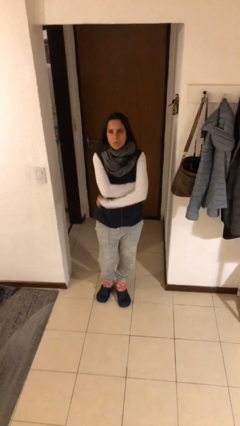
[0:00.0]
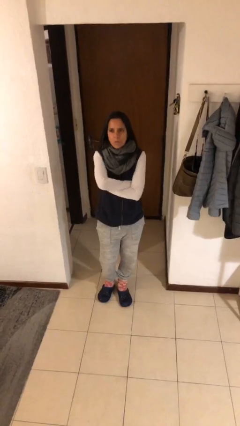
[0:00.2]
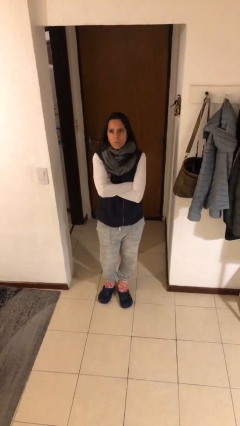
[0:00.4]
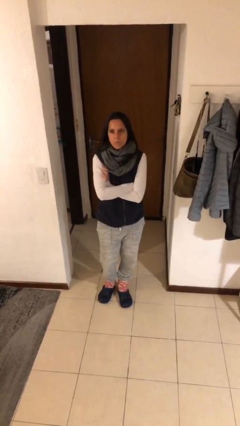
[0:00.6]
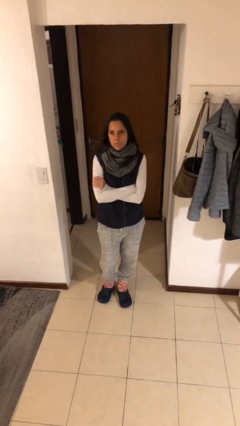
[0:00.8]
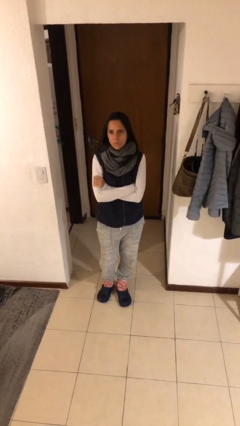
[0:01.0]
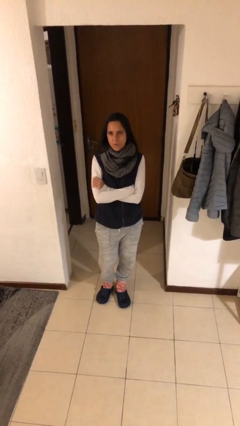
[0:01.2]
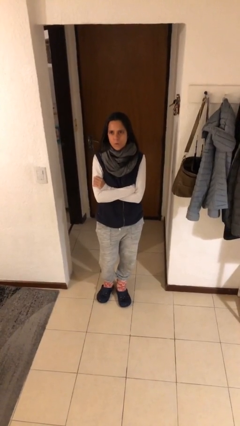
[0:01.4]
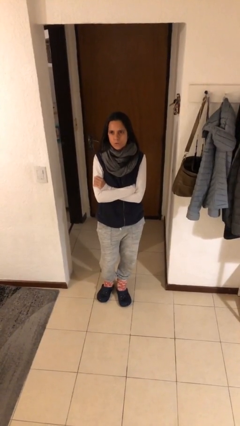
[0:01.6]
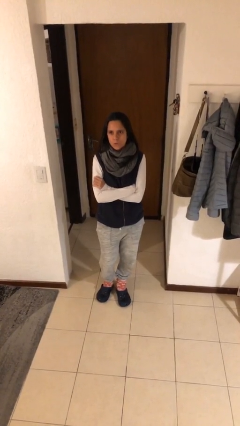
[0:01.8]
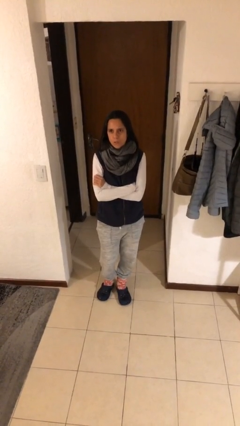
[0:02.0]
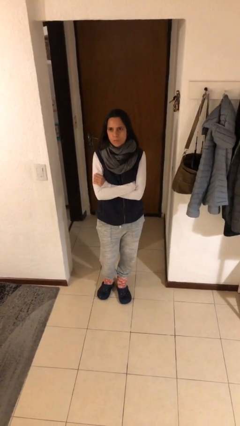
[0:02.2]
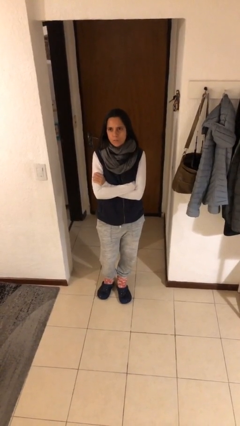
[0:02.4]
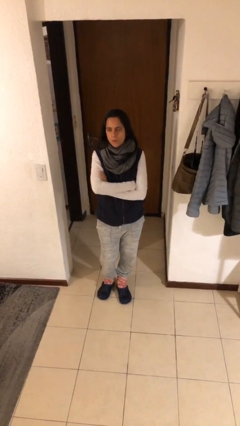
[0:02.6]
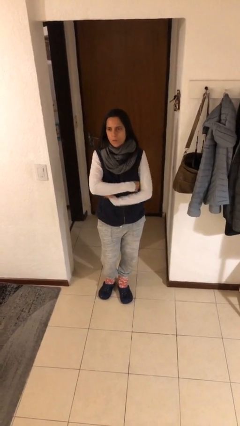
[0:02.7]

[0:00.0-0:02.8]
person crosses arms

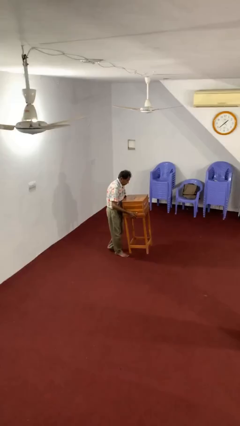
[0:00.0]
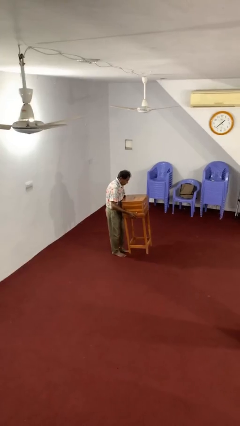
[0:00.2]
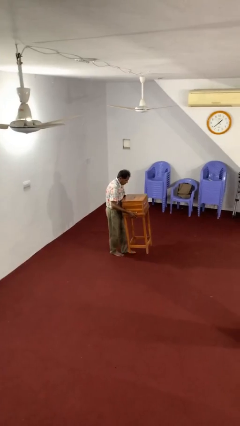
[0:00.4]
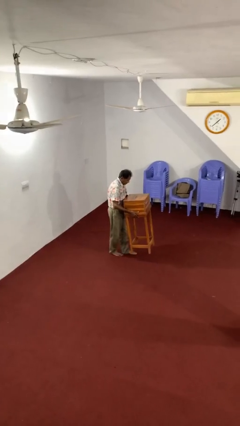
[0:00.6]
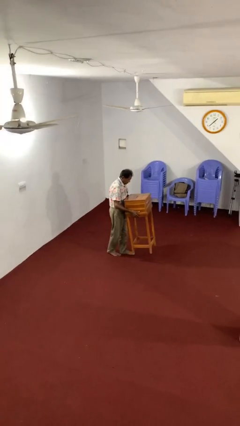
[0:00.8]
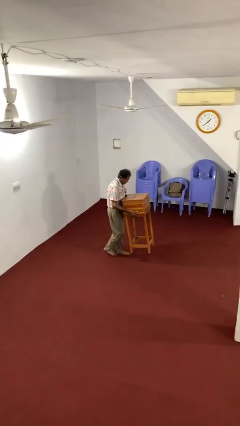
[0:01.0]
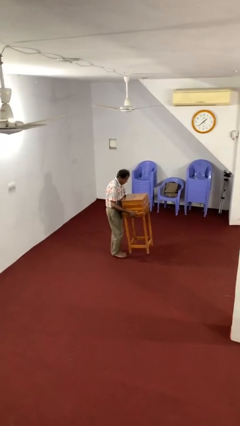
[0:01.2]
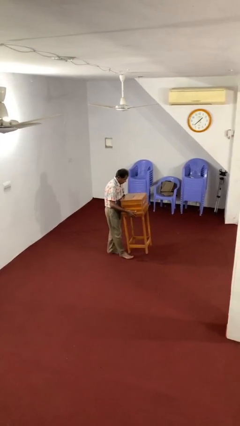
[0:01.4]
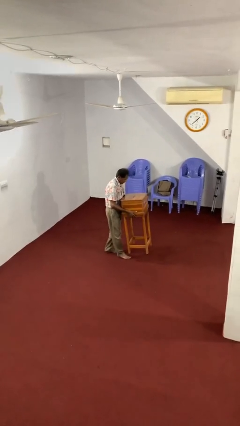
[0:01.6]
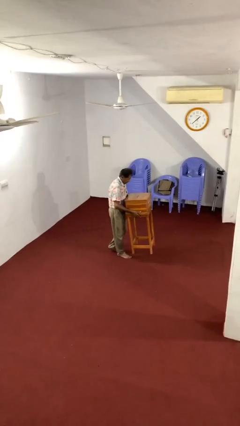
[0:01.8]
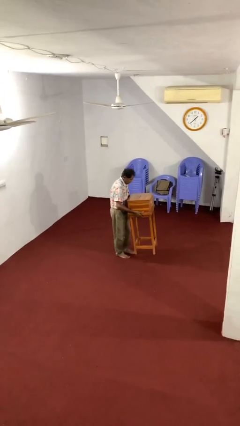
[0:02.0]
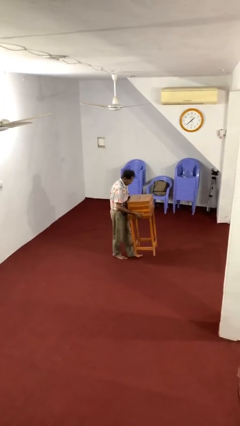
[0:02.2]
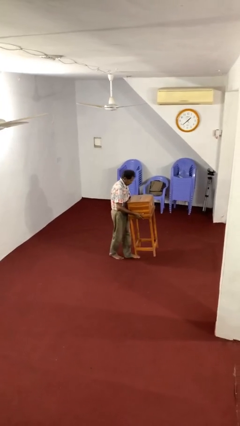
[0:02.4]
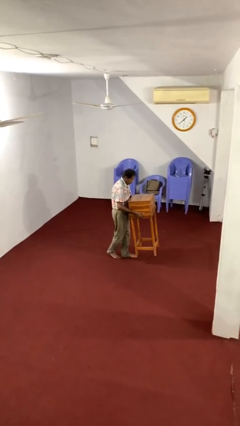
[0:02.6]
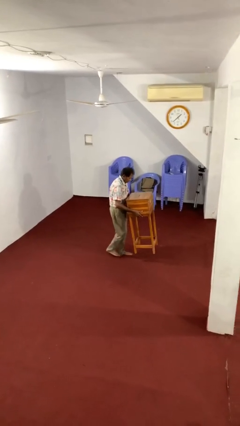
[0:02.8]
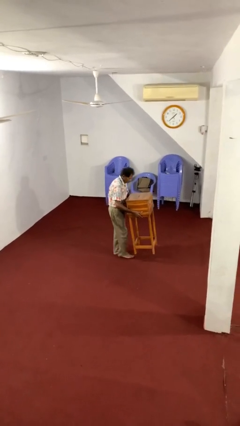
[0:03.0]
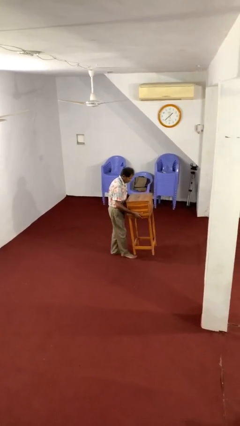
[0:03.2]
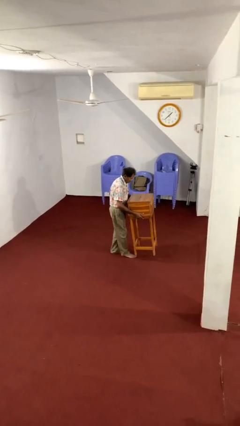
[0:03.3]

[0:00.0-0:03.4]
person carries heavy object

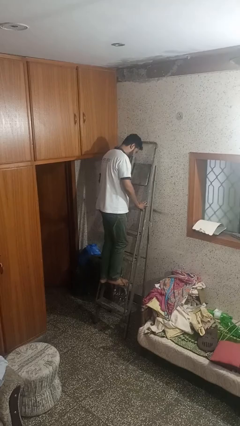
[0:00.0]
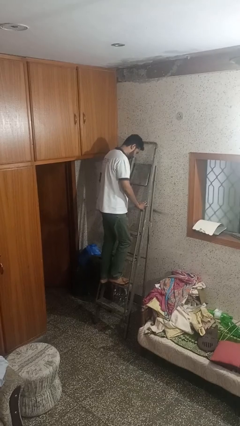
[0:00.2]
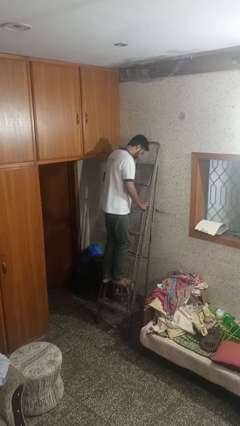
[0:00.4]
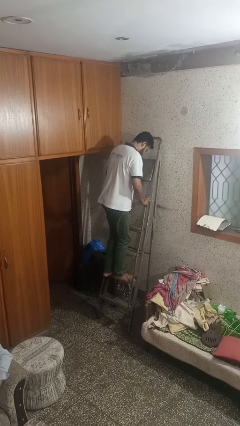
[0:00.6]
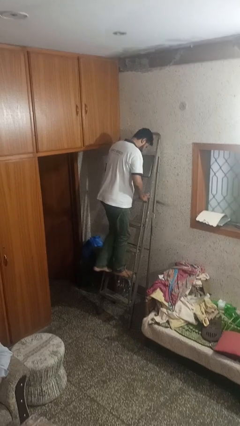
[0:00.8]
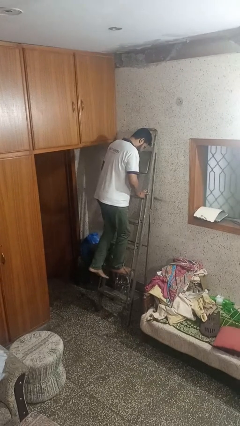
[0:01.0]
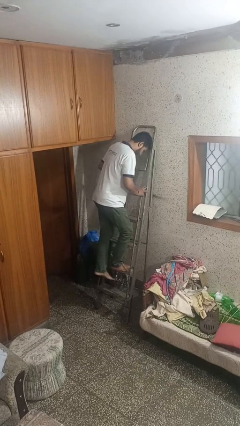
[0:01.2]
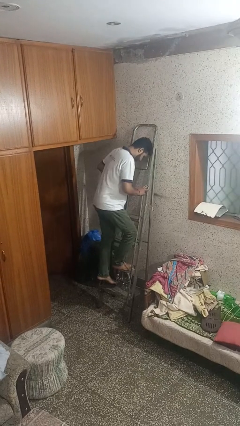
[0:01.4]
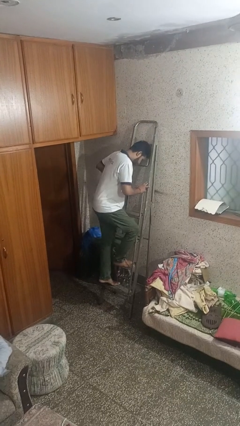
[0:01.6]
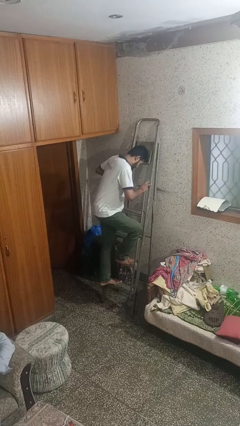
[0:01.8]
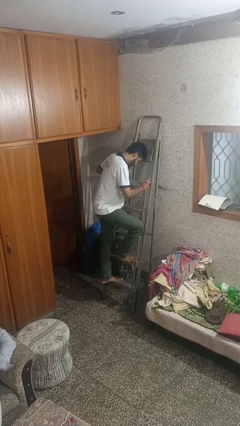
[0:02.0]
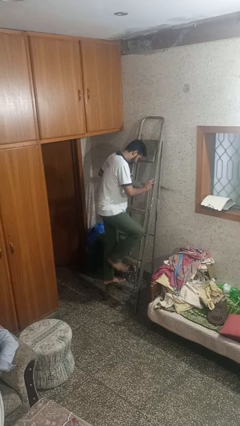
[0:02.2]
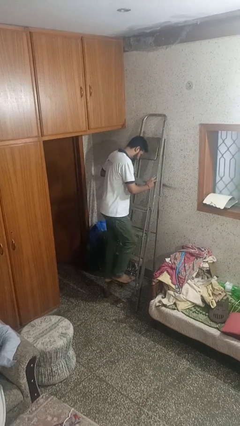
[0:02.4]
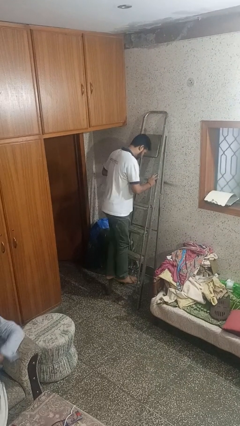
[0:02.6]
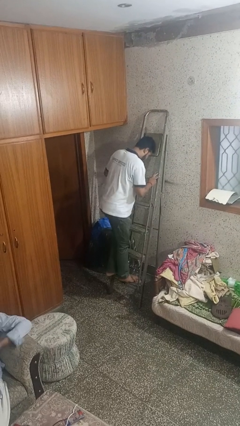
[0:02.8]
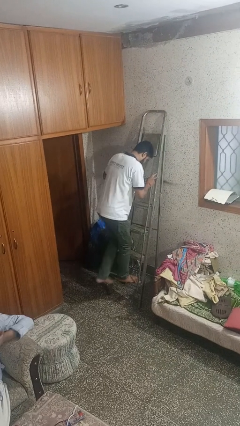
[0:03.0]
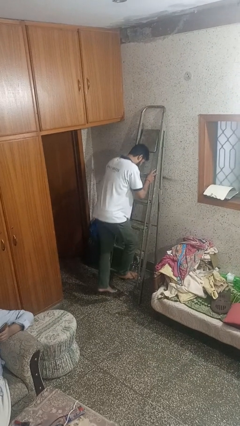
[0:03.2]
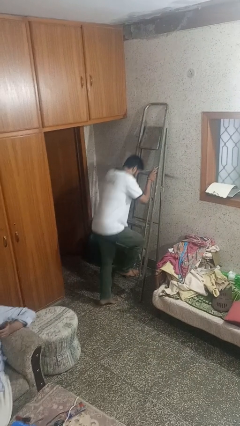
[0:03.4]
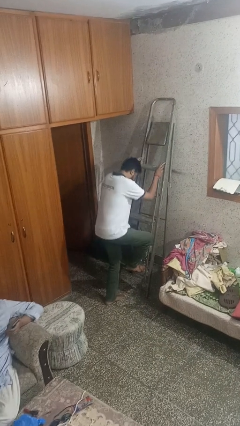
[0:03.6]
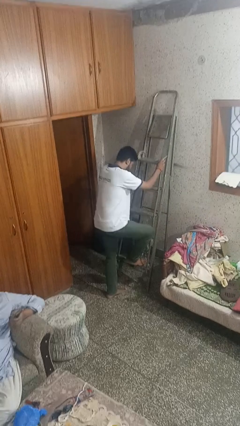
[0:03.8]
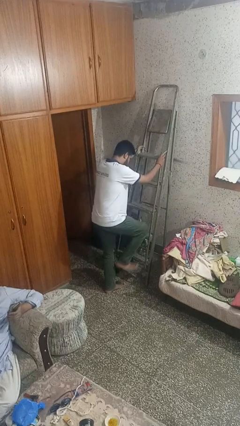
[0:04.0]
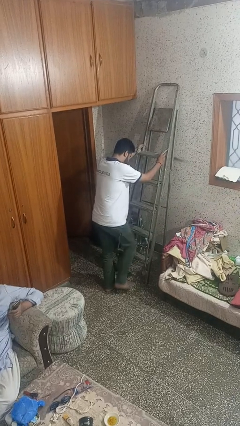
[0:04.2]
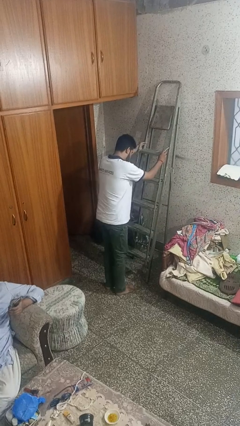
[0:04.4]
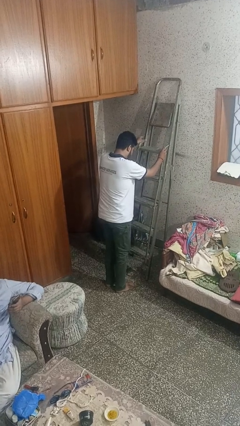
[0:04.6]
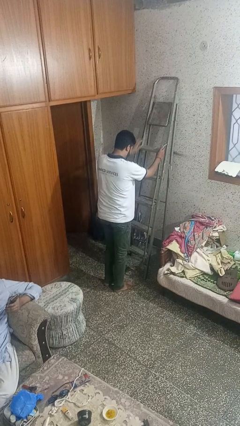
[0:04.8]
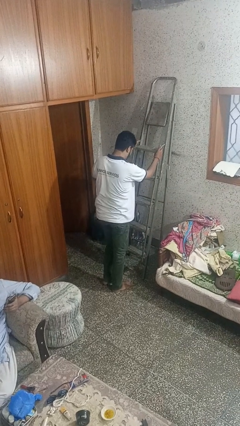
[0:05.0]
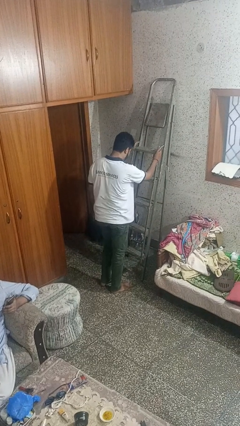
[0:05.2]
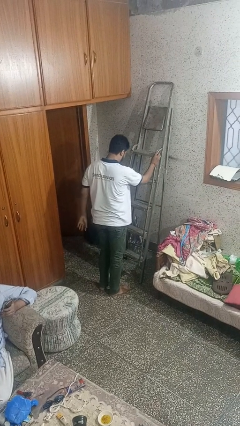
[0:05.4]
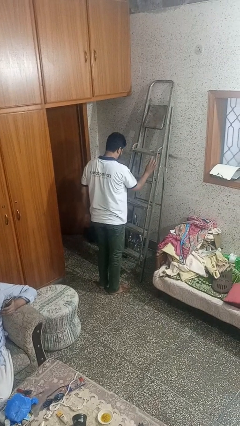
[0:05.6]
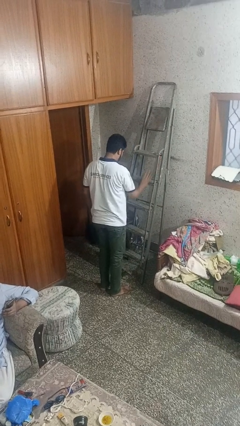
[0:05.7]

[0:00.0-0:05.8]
person climbs down ladder

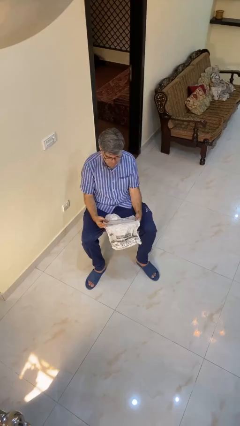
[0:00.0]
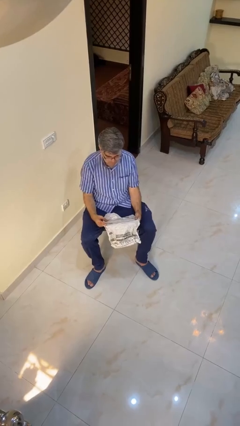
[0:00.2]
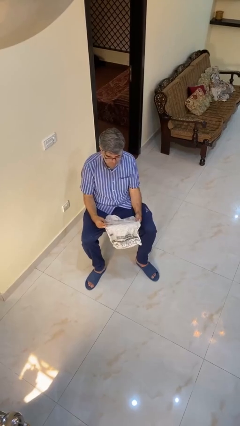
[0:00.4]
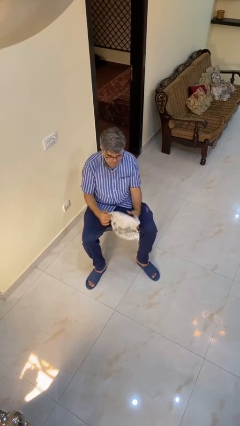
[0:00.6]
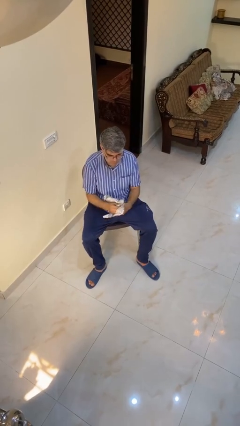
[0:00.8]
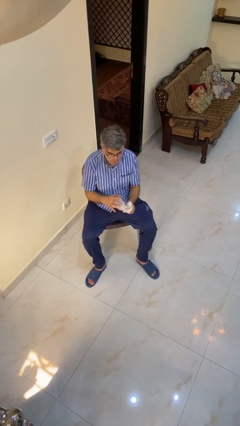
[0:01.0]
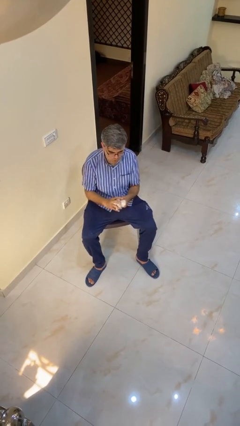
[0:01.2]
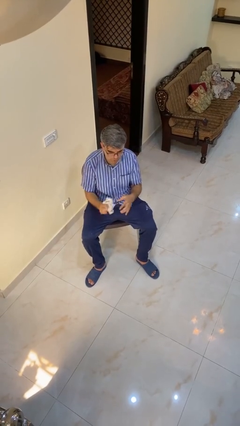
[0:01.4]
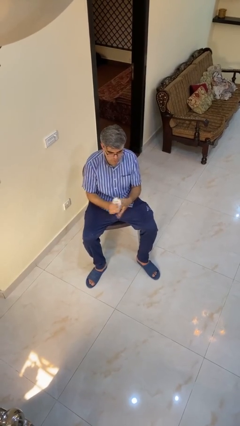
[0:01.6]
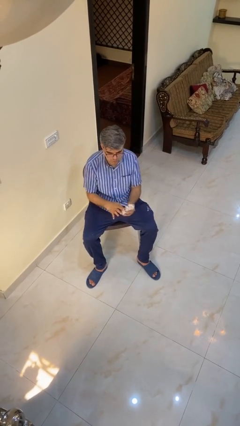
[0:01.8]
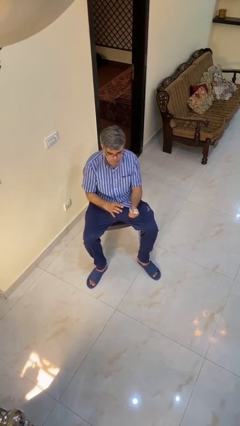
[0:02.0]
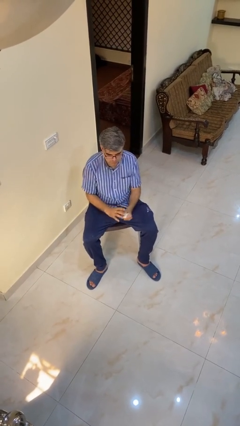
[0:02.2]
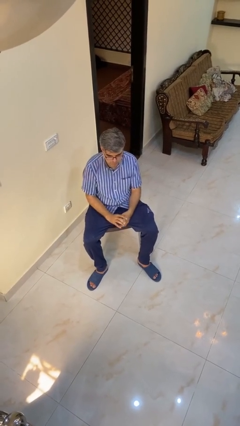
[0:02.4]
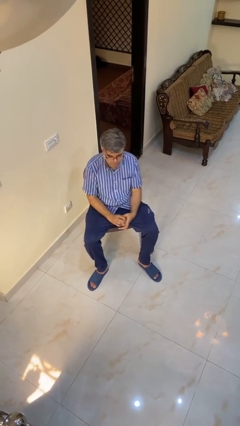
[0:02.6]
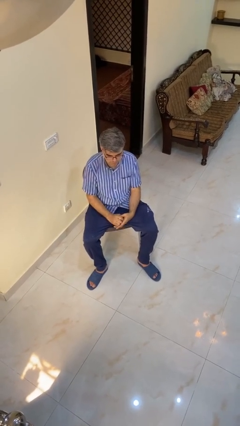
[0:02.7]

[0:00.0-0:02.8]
person crumples paper

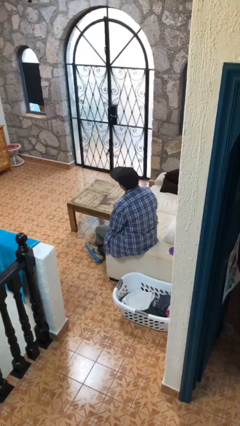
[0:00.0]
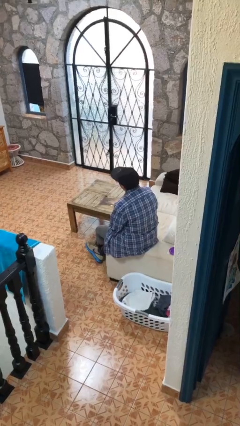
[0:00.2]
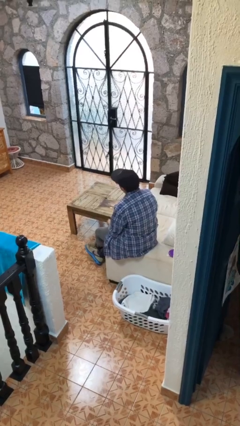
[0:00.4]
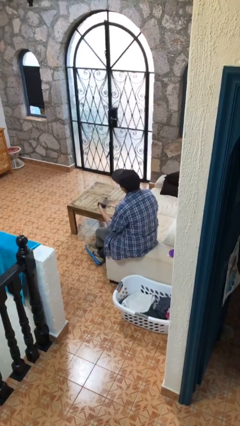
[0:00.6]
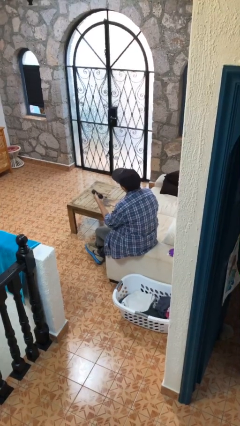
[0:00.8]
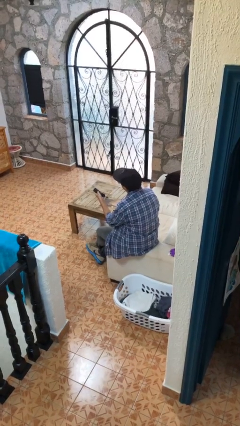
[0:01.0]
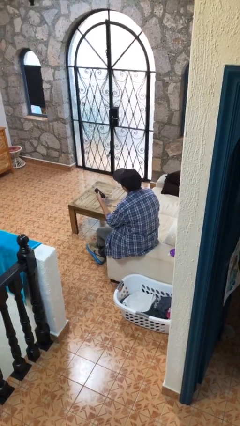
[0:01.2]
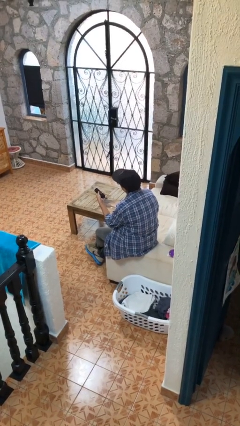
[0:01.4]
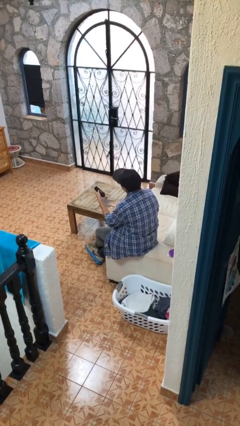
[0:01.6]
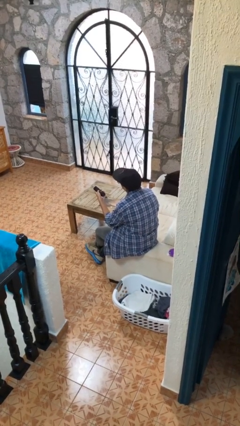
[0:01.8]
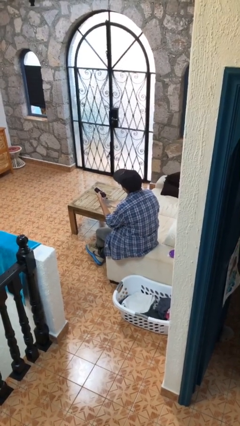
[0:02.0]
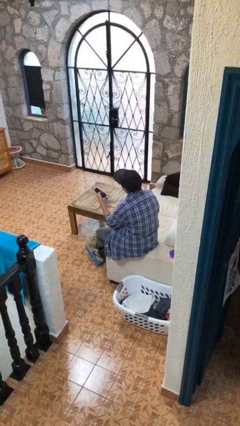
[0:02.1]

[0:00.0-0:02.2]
person uses television remote

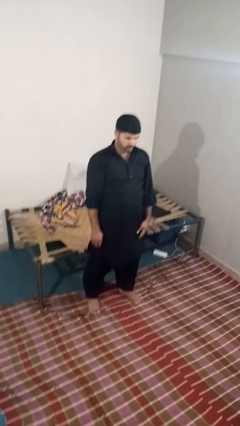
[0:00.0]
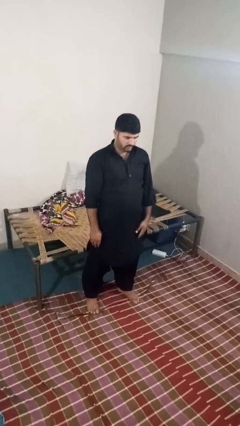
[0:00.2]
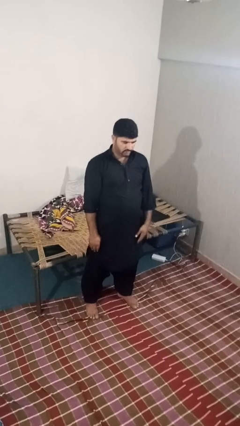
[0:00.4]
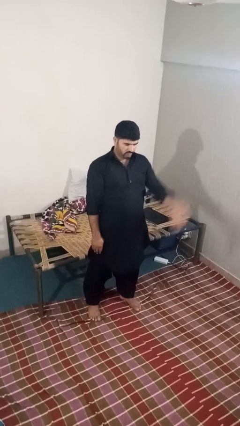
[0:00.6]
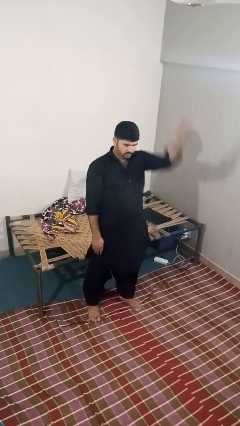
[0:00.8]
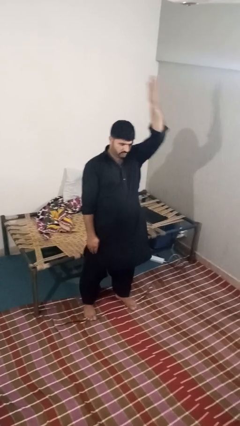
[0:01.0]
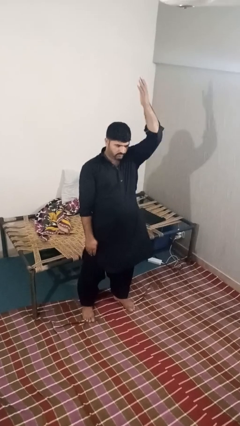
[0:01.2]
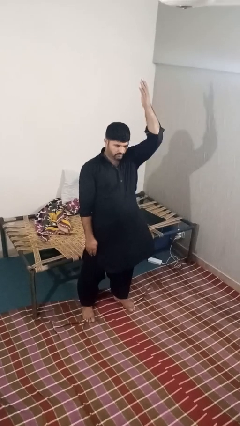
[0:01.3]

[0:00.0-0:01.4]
person gestures swipe up
